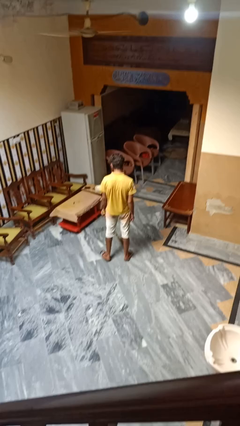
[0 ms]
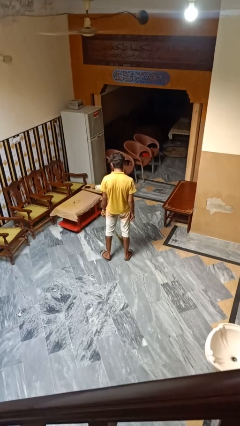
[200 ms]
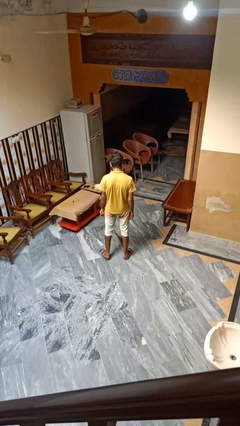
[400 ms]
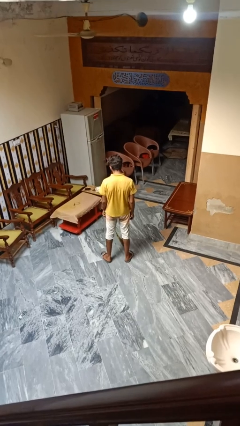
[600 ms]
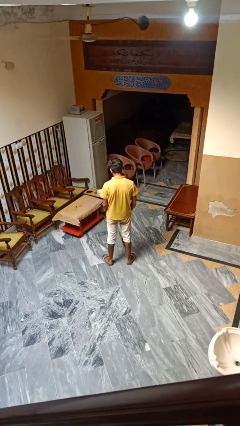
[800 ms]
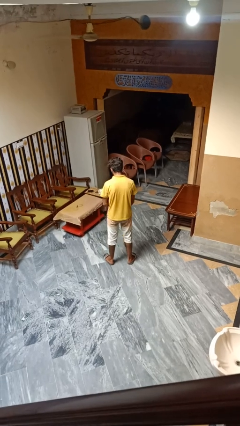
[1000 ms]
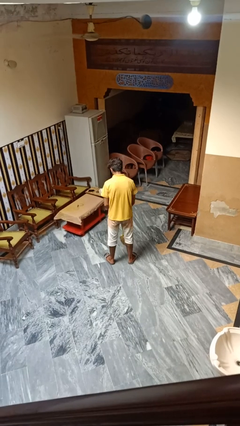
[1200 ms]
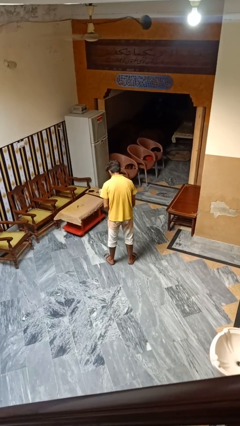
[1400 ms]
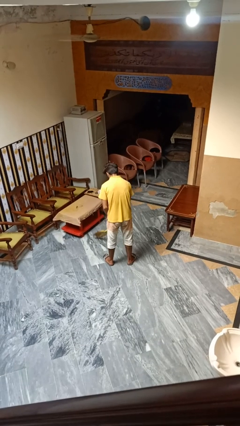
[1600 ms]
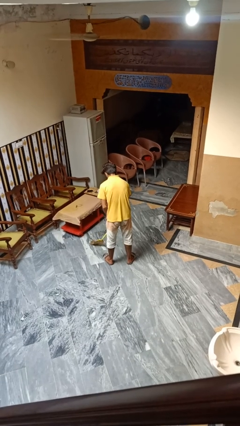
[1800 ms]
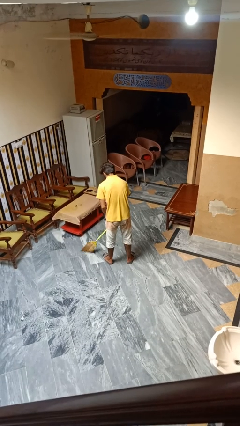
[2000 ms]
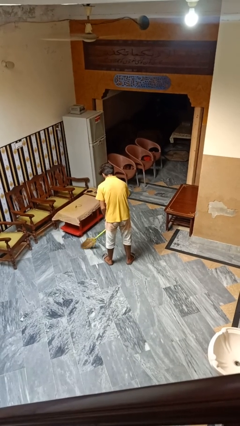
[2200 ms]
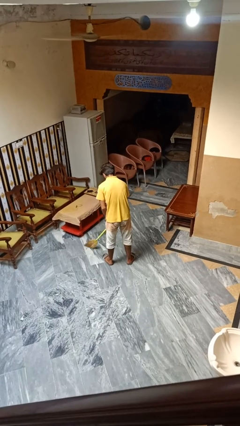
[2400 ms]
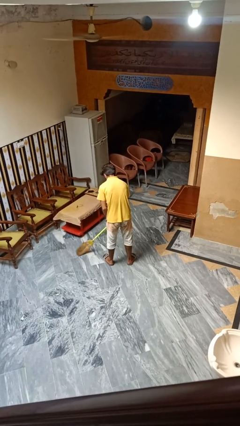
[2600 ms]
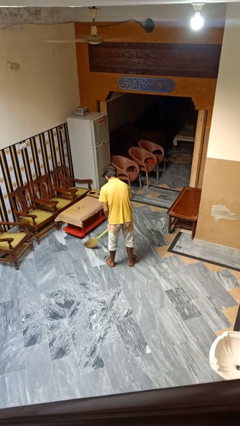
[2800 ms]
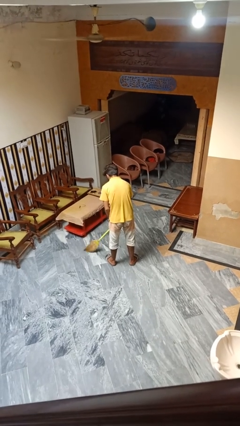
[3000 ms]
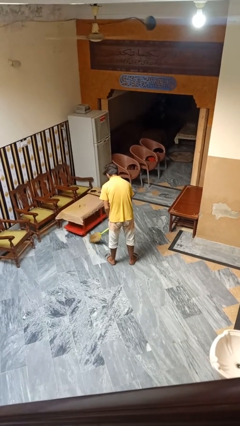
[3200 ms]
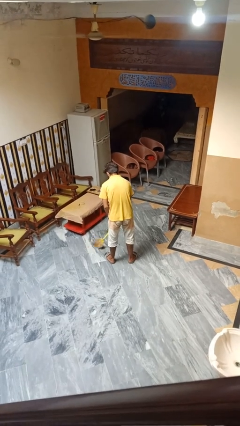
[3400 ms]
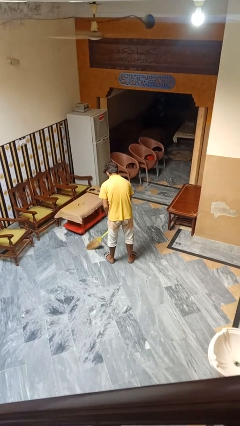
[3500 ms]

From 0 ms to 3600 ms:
person mops

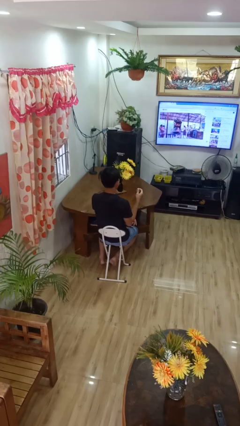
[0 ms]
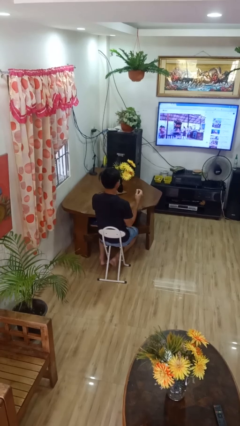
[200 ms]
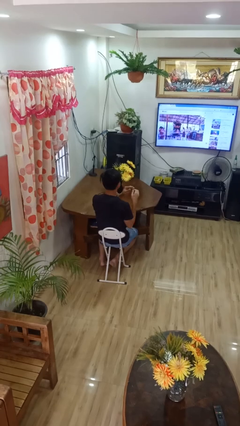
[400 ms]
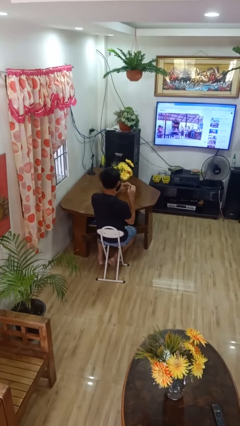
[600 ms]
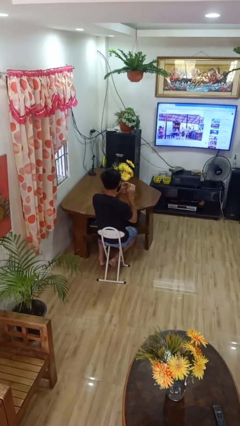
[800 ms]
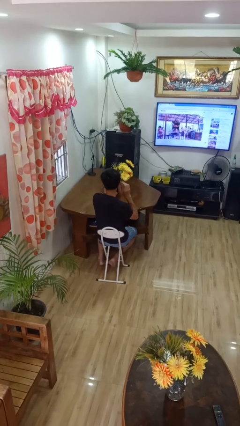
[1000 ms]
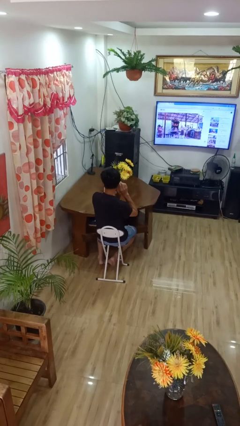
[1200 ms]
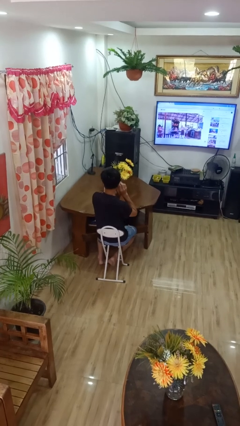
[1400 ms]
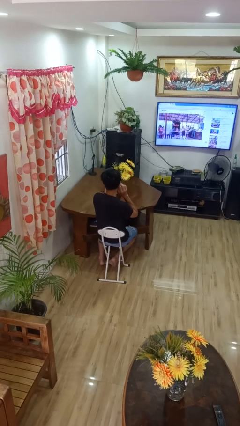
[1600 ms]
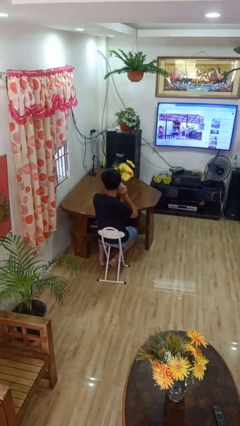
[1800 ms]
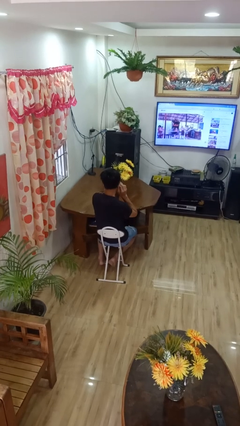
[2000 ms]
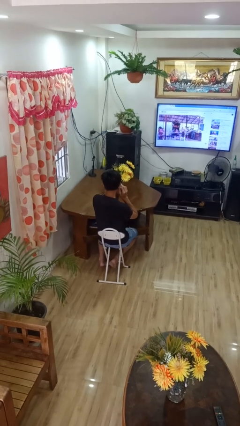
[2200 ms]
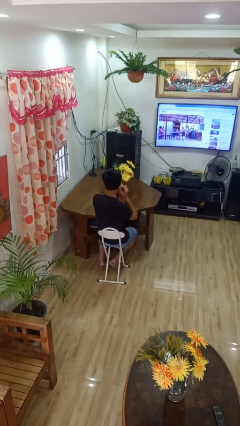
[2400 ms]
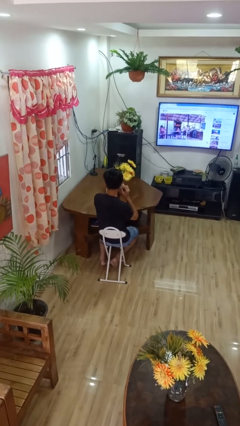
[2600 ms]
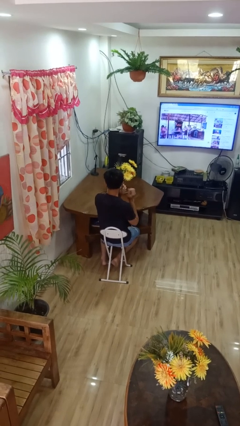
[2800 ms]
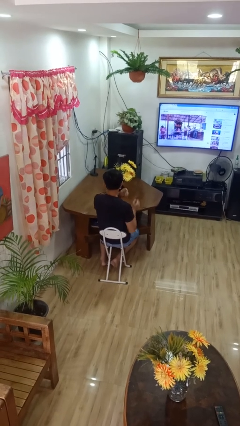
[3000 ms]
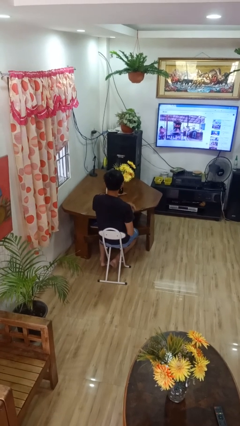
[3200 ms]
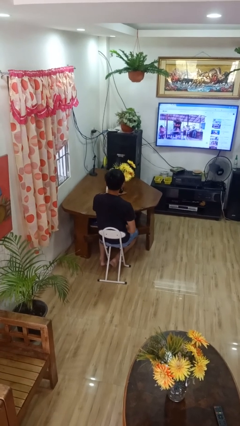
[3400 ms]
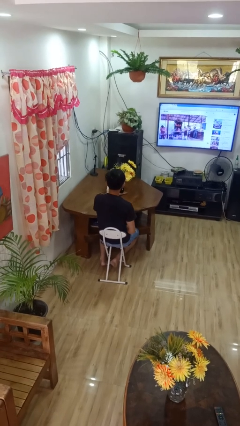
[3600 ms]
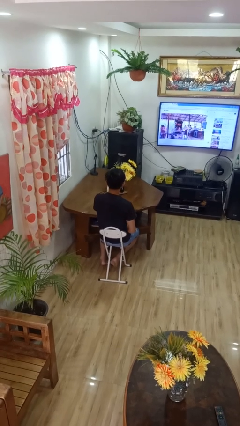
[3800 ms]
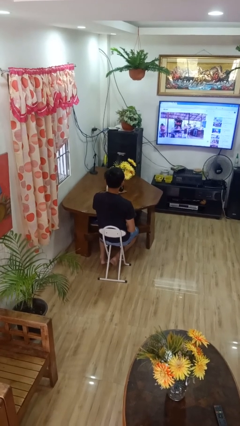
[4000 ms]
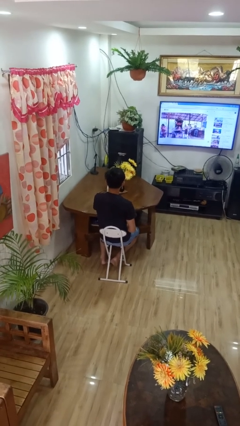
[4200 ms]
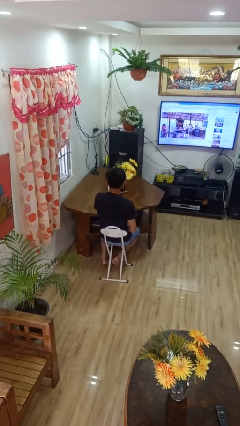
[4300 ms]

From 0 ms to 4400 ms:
person puts on earrings

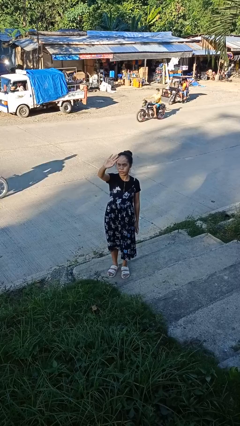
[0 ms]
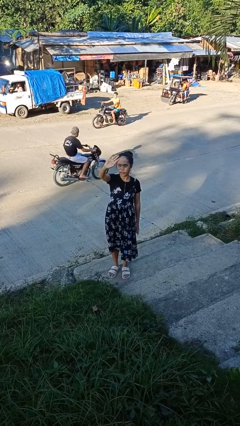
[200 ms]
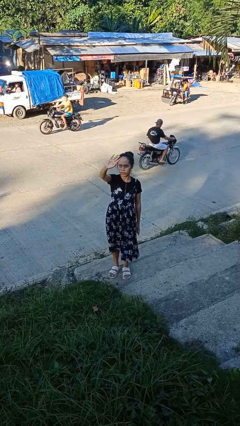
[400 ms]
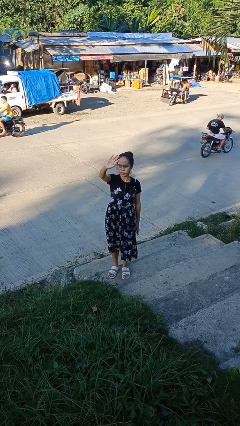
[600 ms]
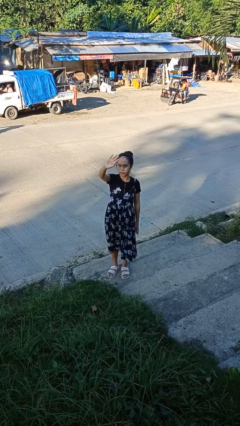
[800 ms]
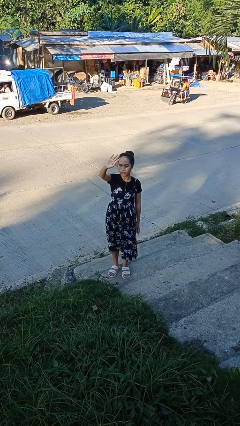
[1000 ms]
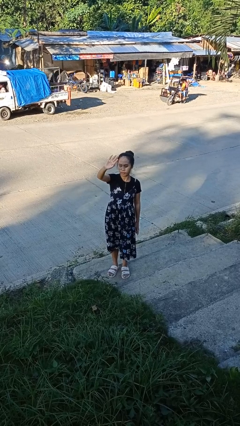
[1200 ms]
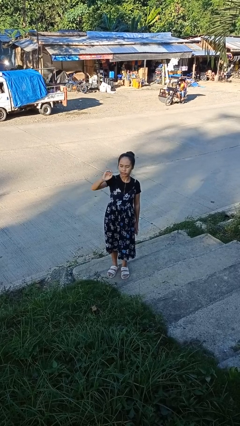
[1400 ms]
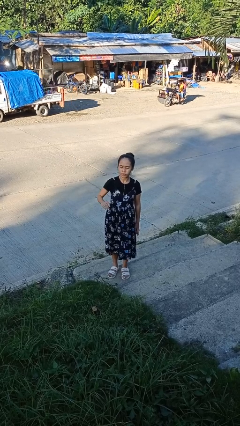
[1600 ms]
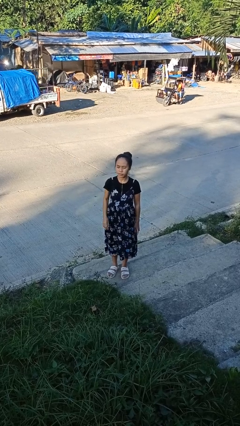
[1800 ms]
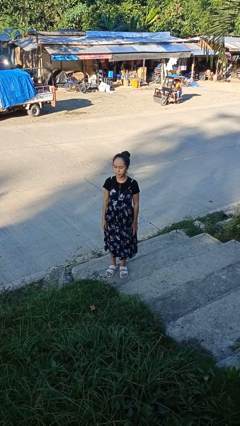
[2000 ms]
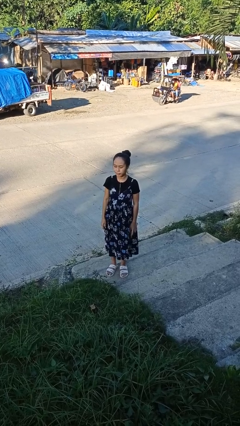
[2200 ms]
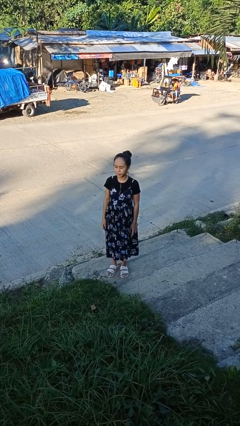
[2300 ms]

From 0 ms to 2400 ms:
person shades eyes

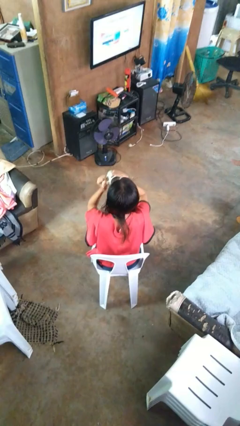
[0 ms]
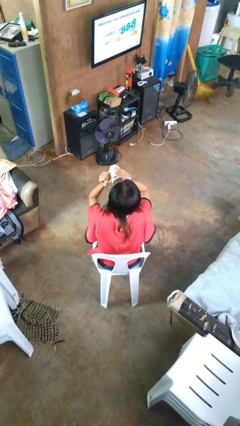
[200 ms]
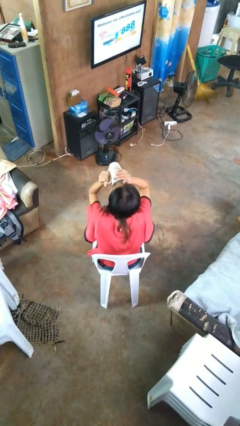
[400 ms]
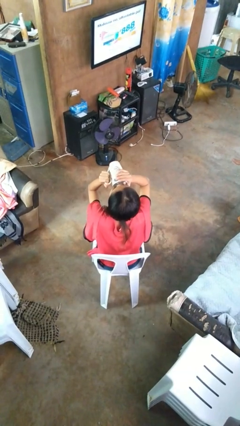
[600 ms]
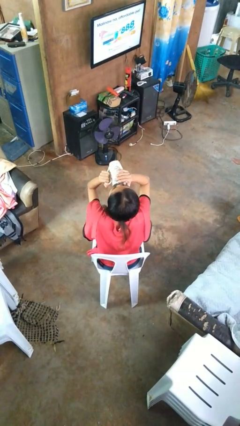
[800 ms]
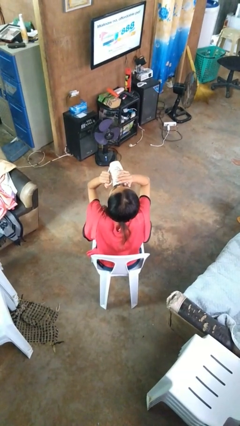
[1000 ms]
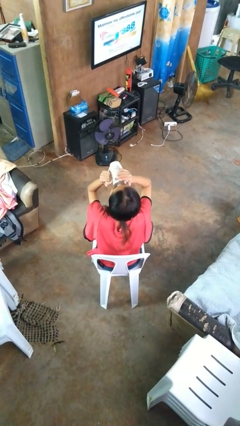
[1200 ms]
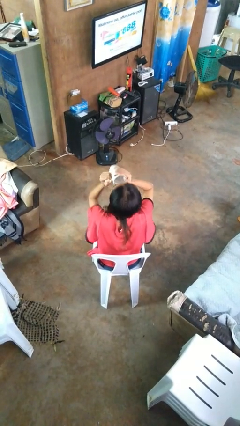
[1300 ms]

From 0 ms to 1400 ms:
person drinks from mug

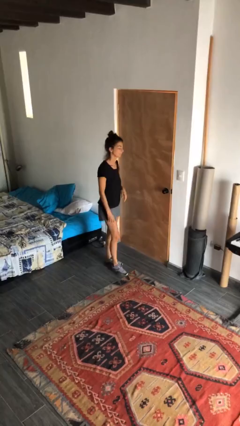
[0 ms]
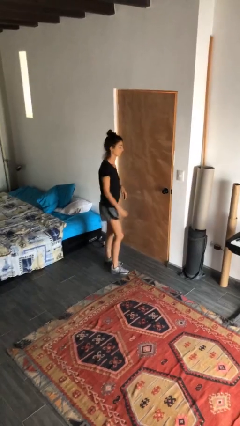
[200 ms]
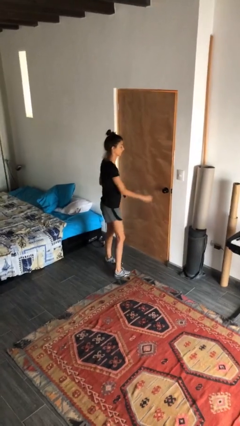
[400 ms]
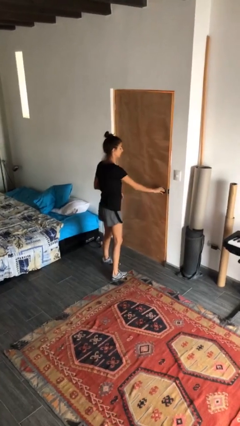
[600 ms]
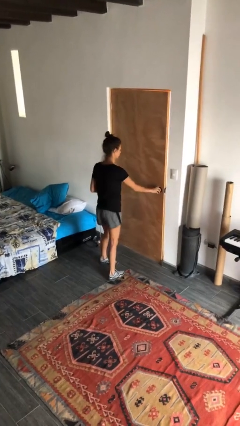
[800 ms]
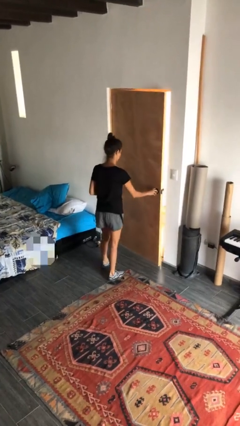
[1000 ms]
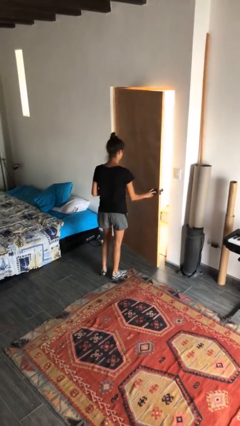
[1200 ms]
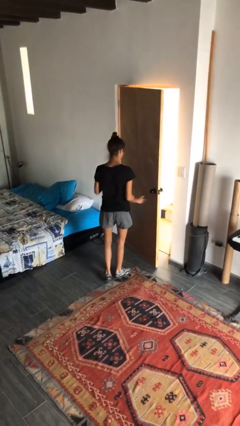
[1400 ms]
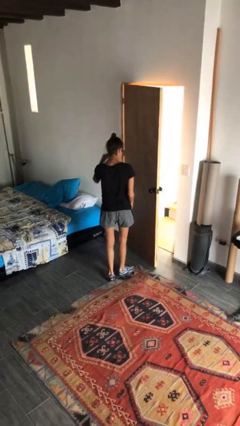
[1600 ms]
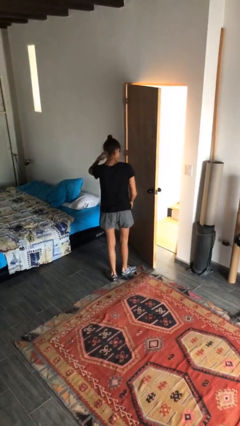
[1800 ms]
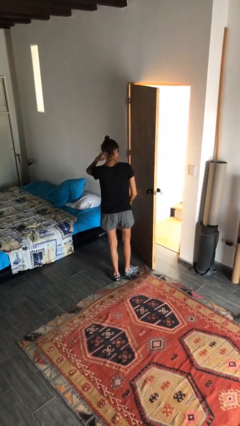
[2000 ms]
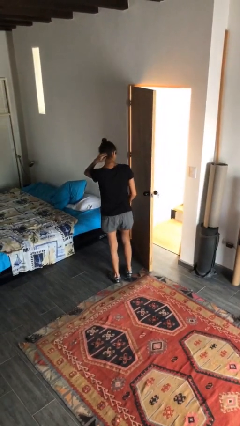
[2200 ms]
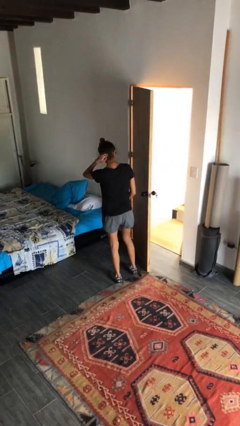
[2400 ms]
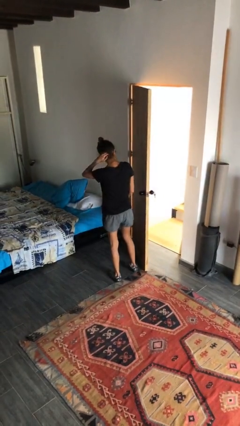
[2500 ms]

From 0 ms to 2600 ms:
person opens facility door

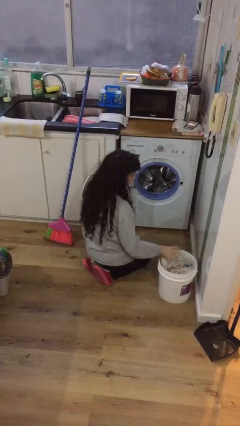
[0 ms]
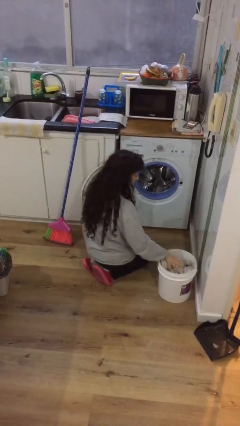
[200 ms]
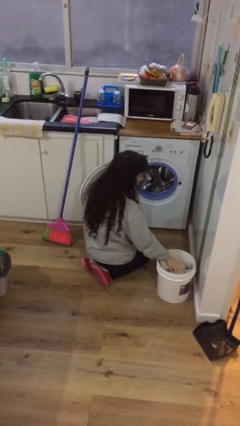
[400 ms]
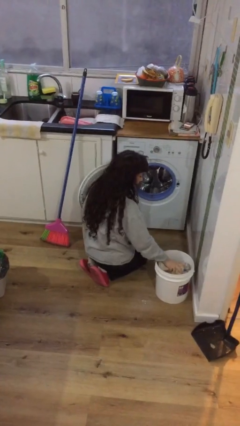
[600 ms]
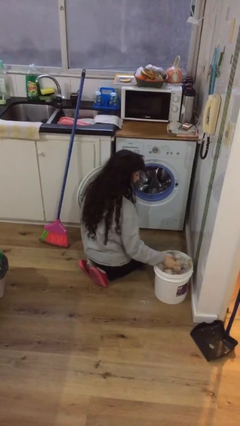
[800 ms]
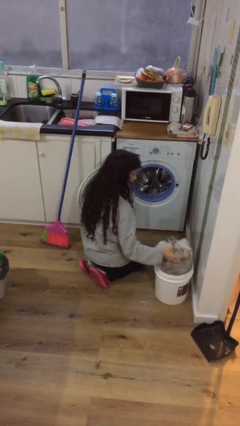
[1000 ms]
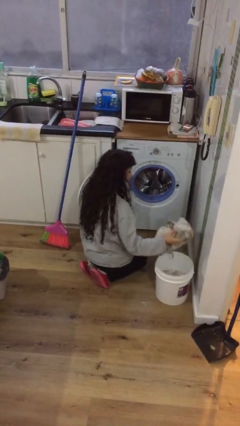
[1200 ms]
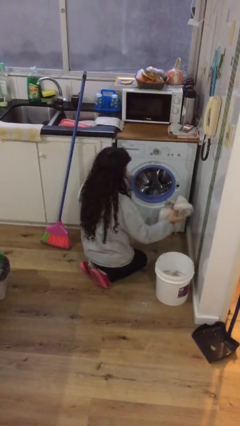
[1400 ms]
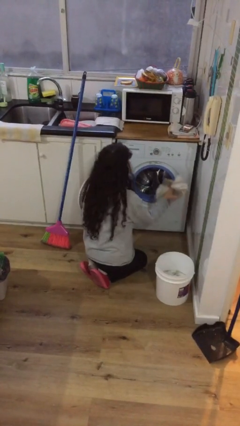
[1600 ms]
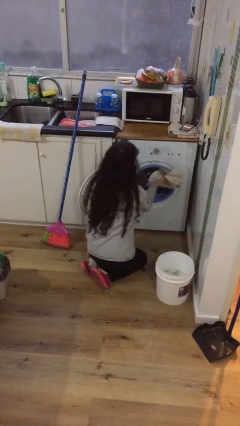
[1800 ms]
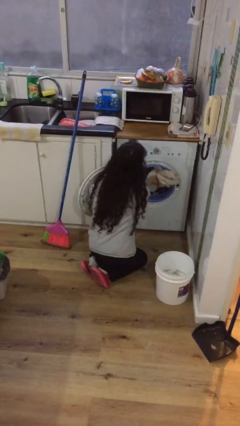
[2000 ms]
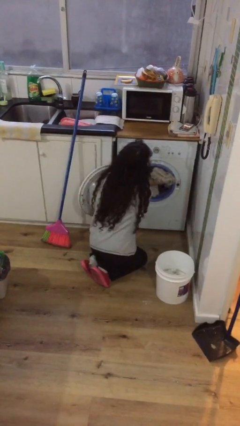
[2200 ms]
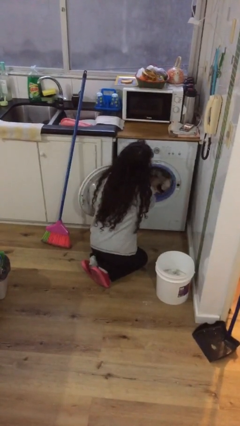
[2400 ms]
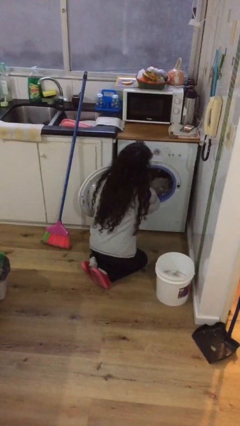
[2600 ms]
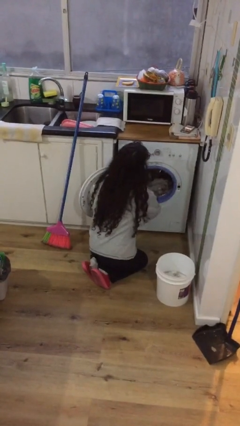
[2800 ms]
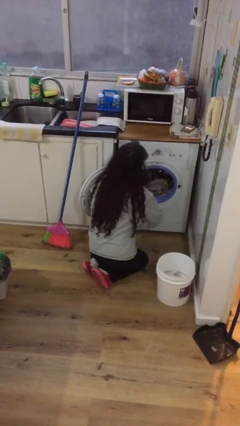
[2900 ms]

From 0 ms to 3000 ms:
person loads dryer

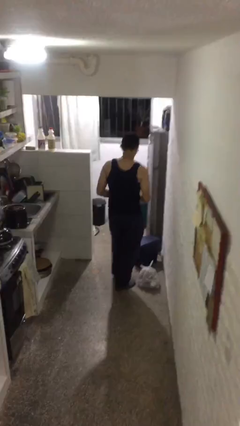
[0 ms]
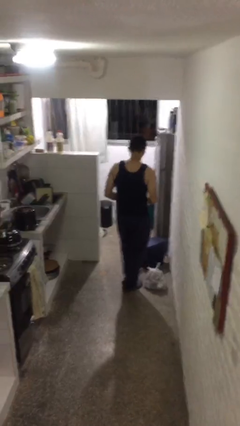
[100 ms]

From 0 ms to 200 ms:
person removes trashbag from trashcan
